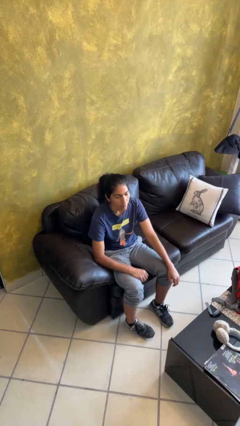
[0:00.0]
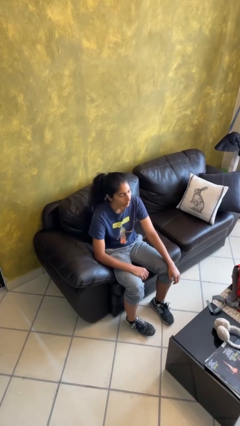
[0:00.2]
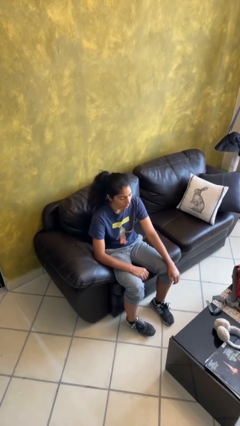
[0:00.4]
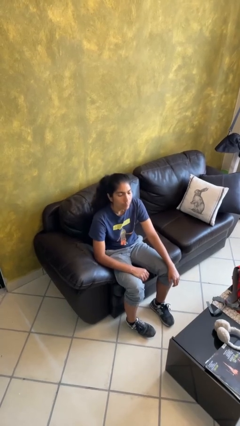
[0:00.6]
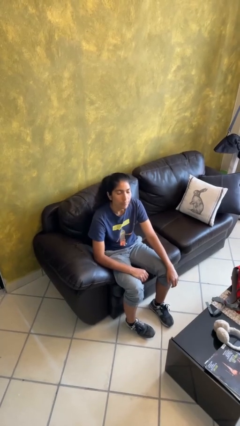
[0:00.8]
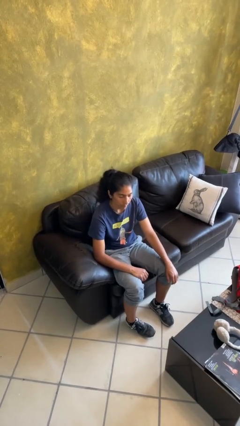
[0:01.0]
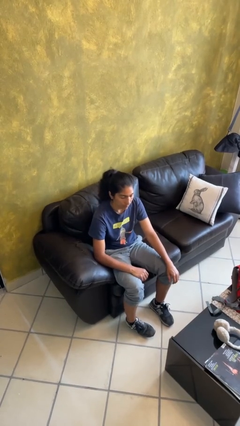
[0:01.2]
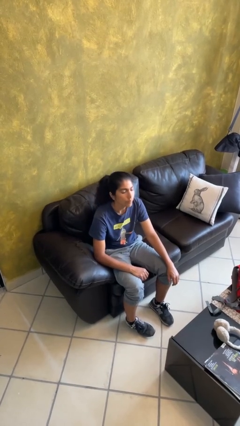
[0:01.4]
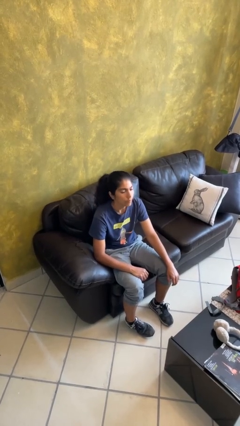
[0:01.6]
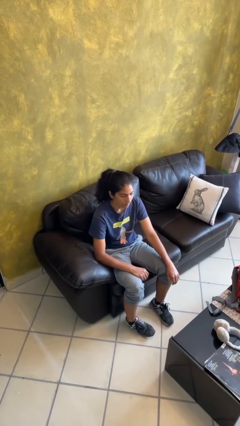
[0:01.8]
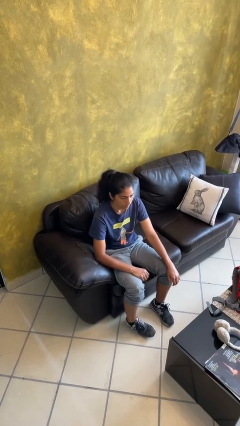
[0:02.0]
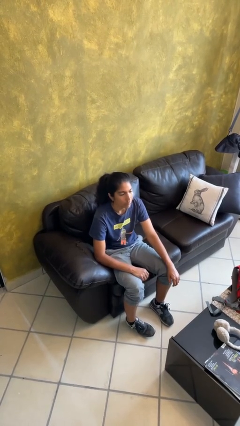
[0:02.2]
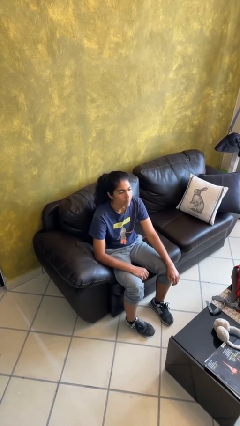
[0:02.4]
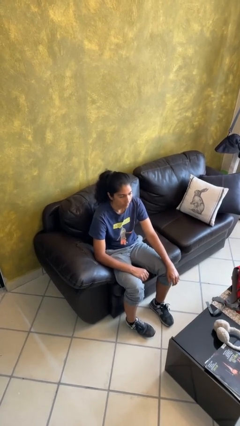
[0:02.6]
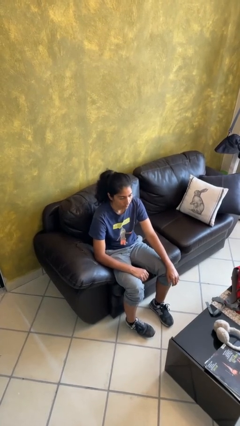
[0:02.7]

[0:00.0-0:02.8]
person nods head

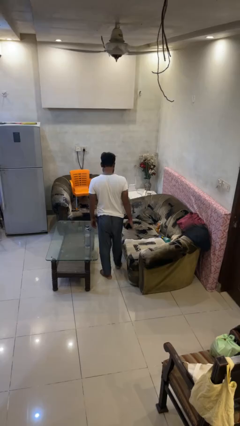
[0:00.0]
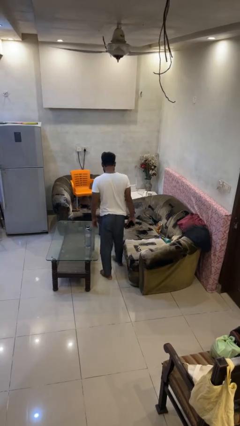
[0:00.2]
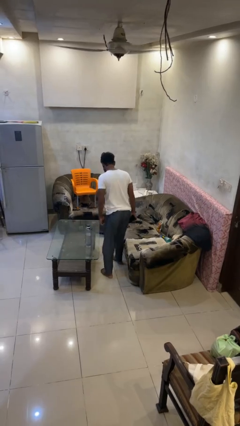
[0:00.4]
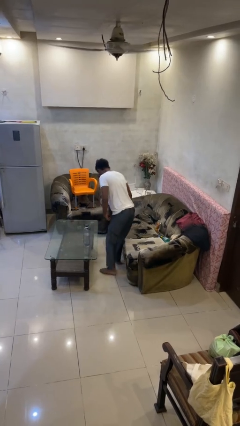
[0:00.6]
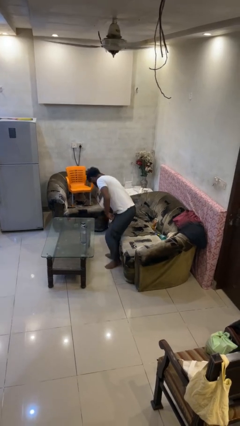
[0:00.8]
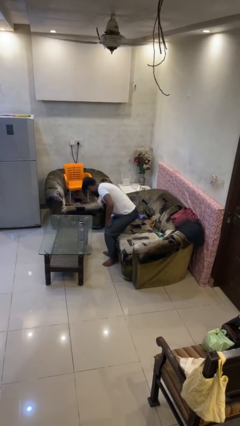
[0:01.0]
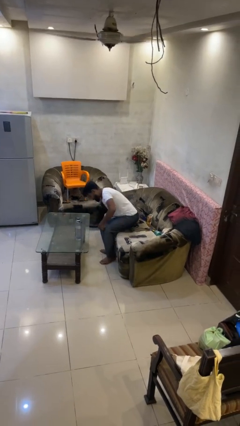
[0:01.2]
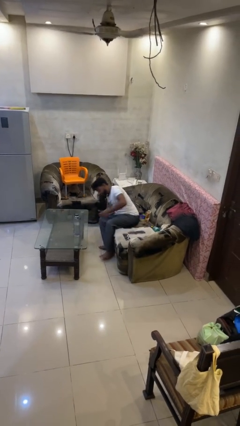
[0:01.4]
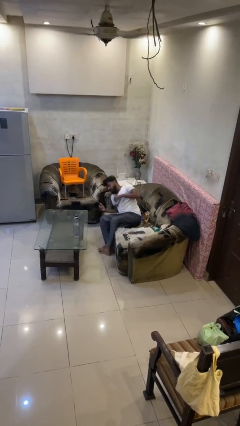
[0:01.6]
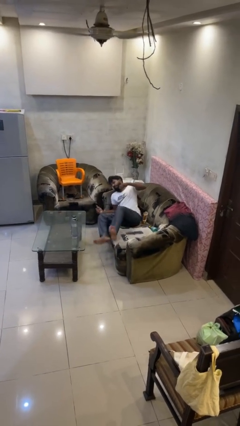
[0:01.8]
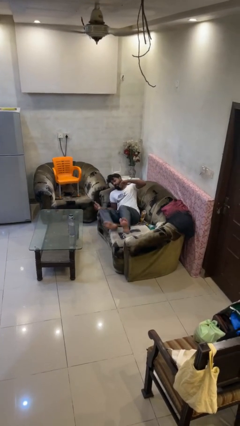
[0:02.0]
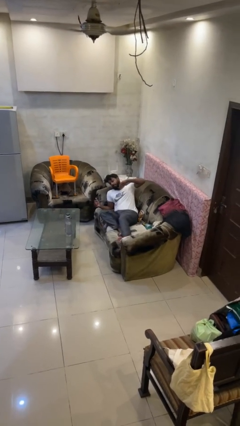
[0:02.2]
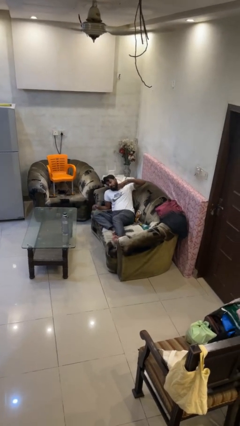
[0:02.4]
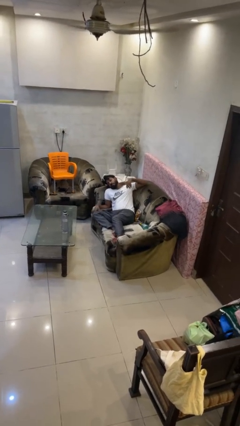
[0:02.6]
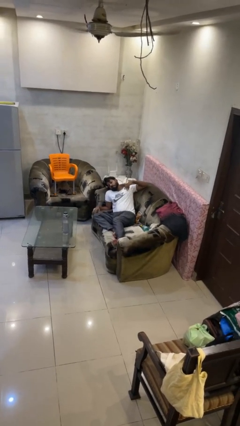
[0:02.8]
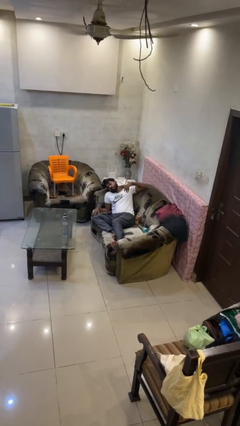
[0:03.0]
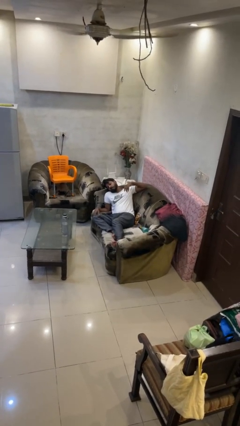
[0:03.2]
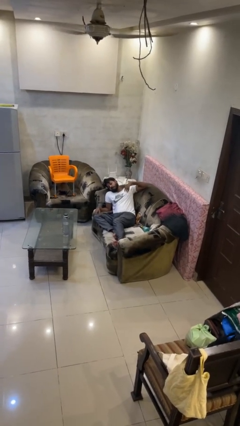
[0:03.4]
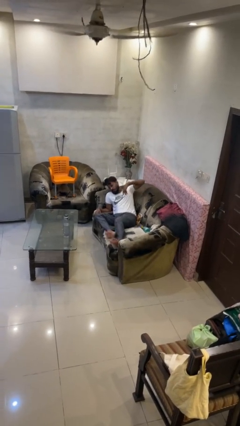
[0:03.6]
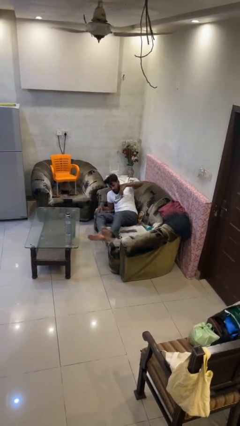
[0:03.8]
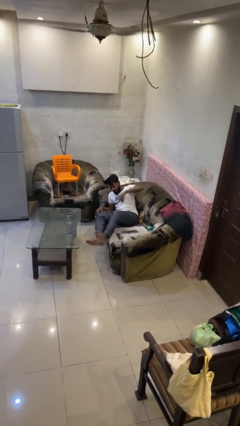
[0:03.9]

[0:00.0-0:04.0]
person lies down on couch

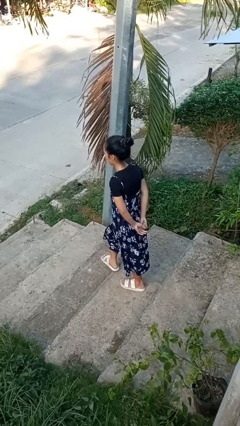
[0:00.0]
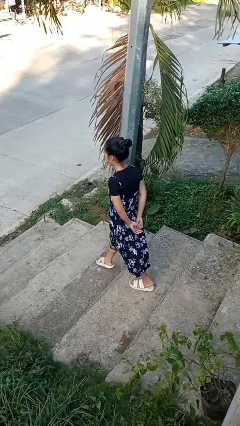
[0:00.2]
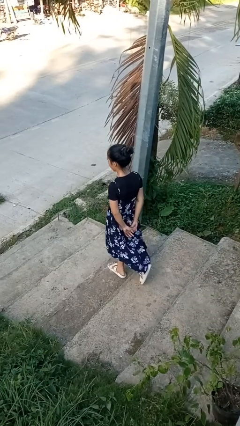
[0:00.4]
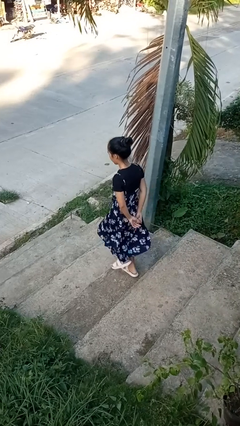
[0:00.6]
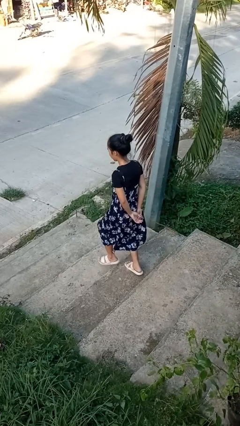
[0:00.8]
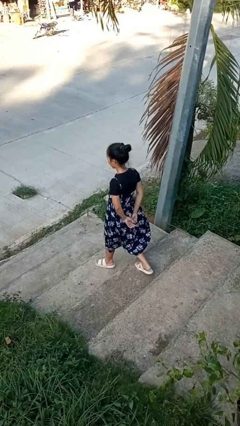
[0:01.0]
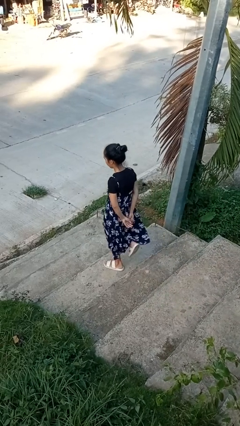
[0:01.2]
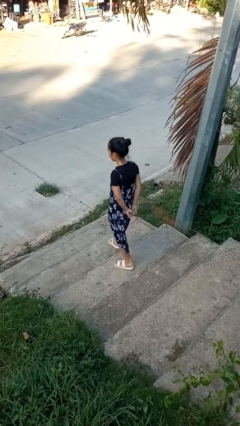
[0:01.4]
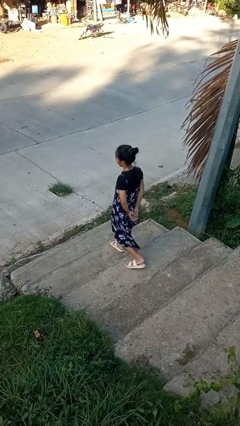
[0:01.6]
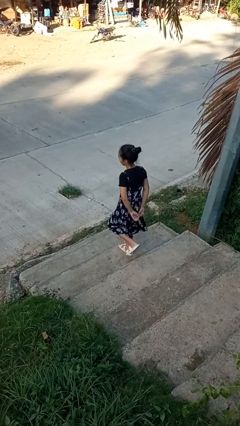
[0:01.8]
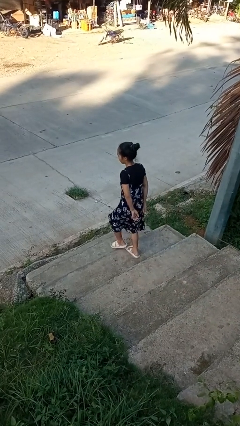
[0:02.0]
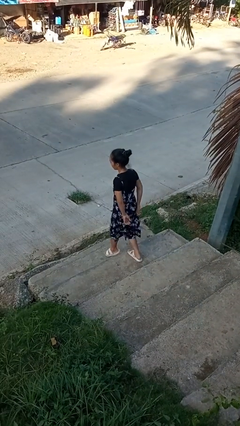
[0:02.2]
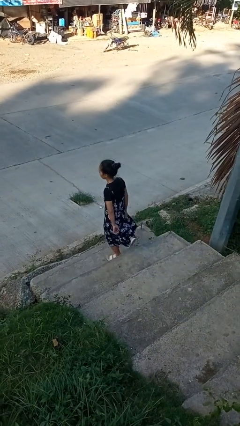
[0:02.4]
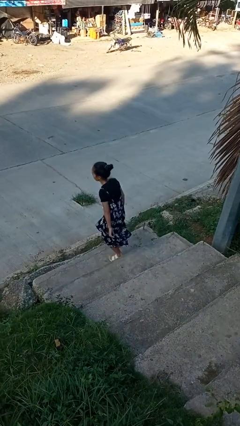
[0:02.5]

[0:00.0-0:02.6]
person climbs down stairs

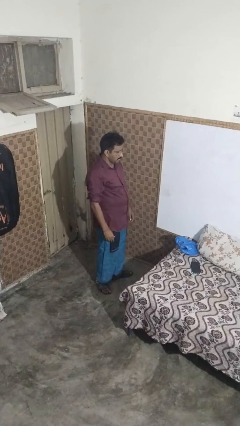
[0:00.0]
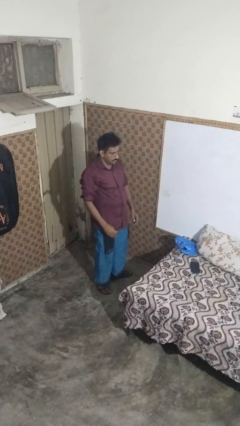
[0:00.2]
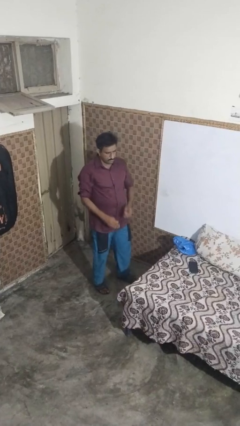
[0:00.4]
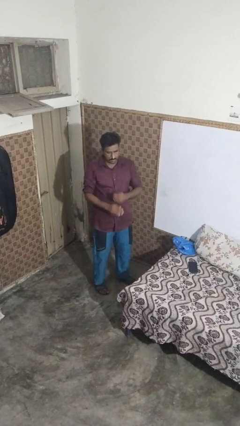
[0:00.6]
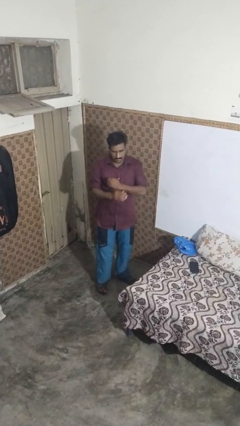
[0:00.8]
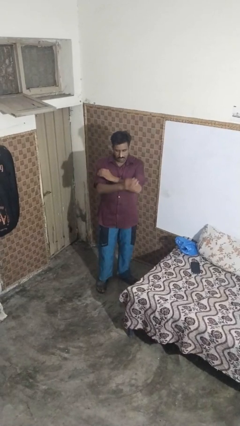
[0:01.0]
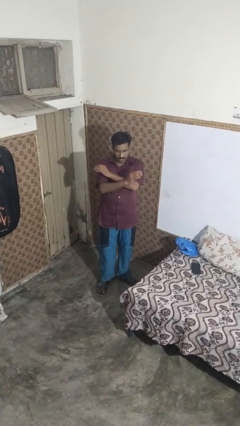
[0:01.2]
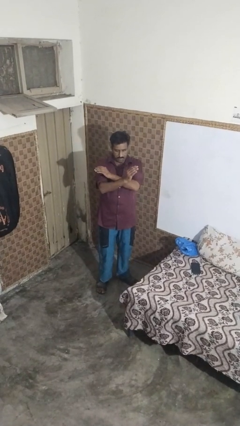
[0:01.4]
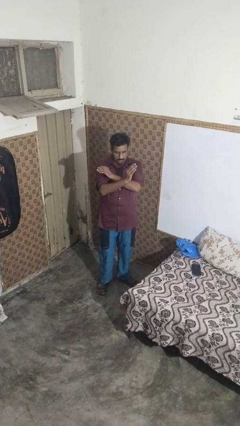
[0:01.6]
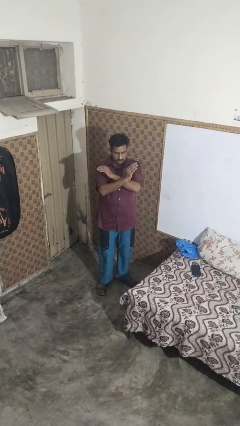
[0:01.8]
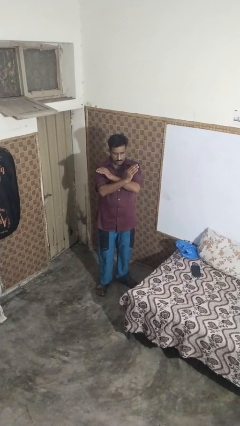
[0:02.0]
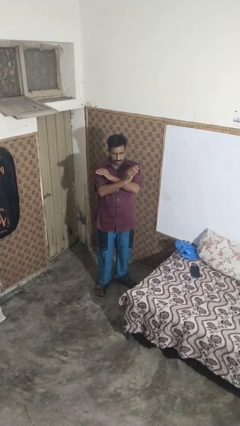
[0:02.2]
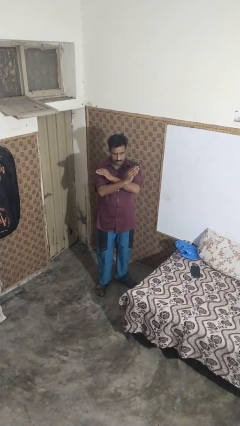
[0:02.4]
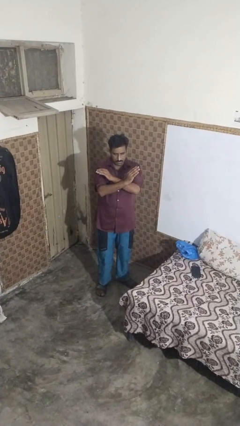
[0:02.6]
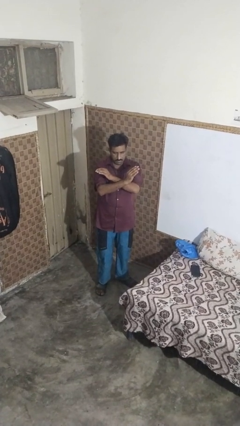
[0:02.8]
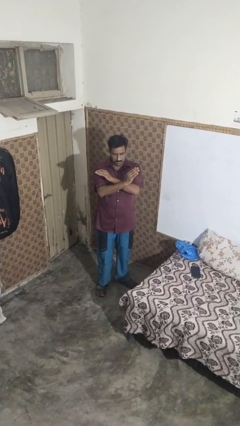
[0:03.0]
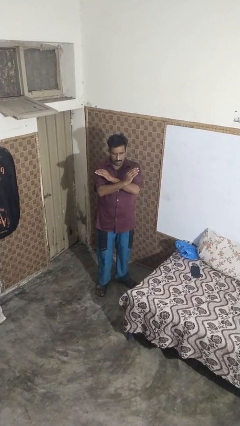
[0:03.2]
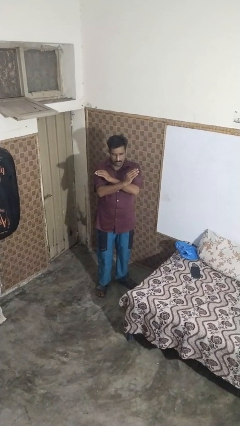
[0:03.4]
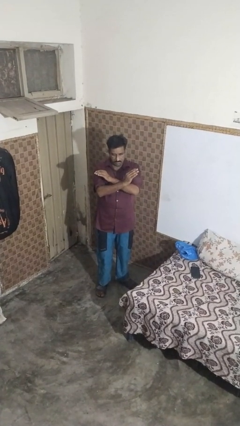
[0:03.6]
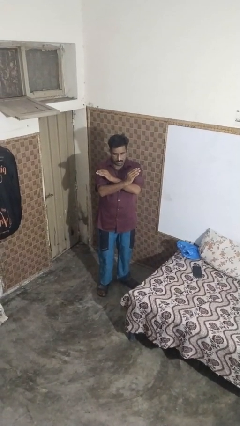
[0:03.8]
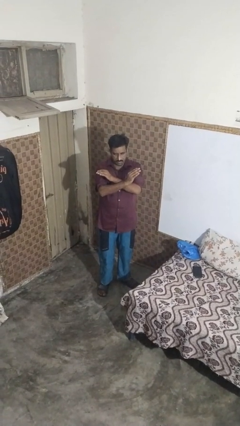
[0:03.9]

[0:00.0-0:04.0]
person gestures arms x

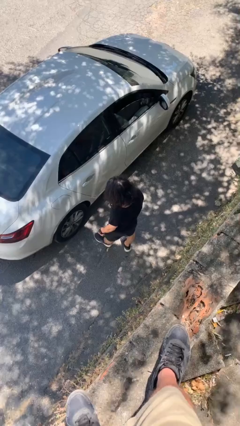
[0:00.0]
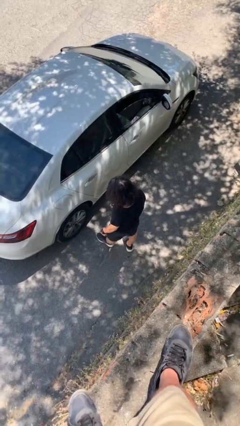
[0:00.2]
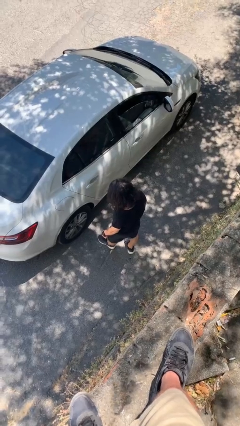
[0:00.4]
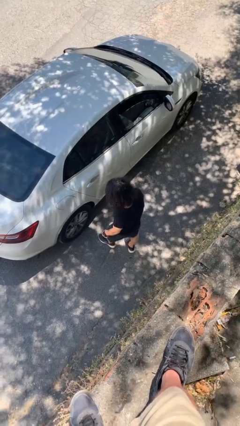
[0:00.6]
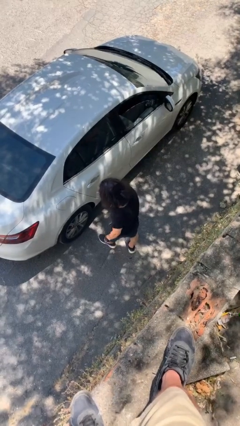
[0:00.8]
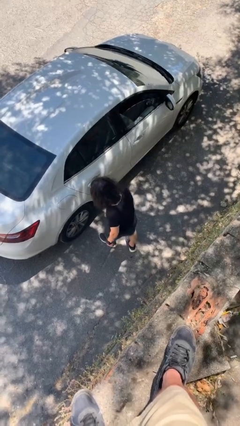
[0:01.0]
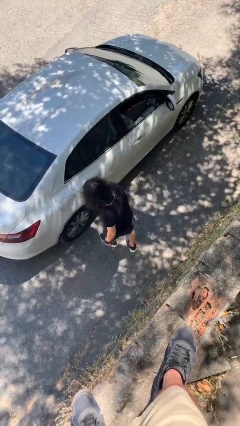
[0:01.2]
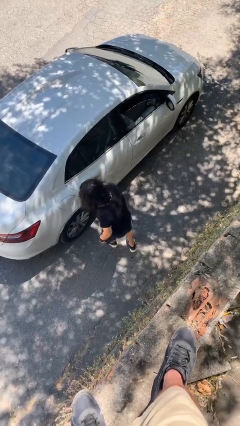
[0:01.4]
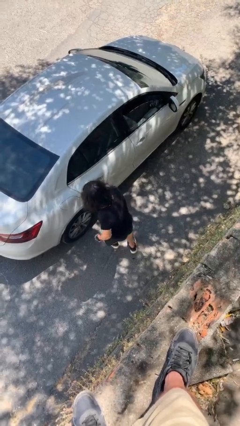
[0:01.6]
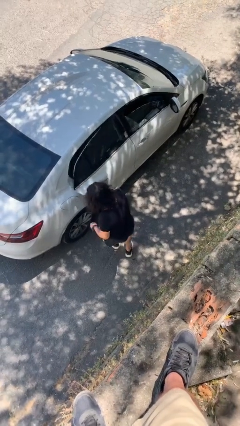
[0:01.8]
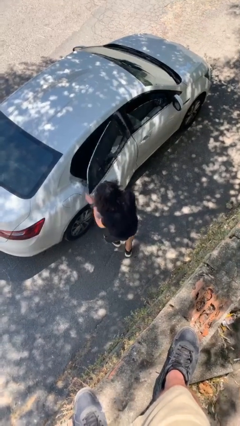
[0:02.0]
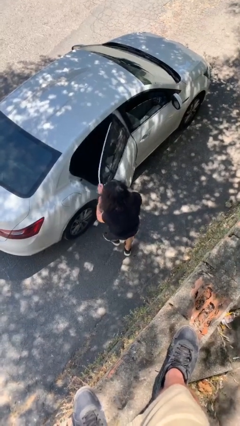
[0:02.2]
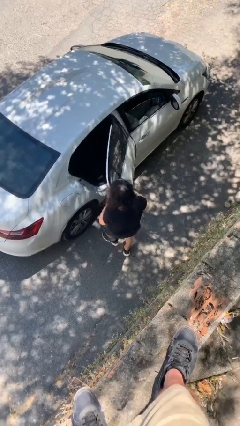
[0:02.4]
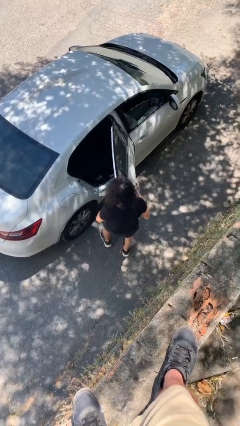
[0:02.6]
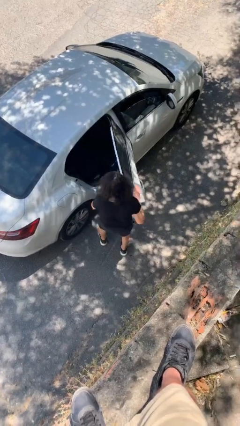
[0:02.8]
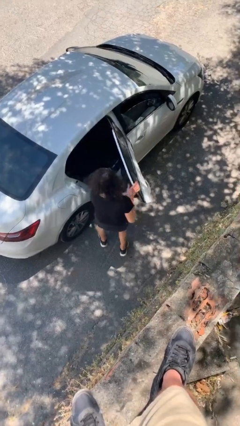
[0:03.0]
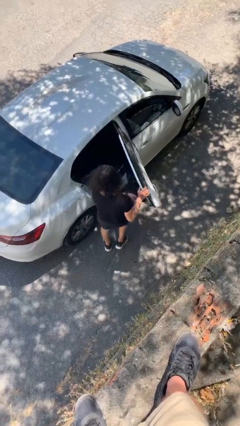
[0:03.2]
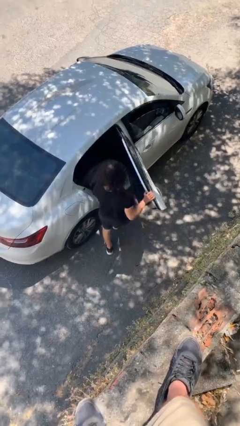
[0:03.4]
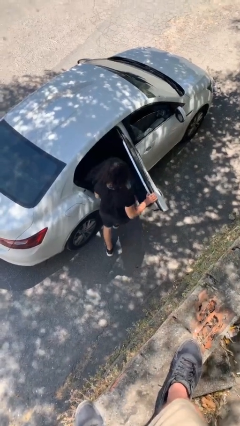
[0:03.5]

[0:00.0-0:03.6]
person opens car door

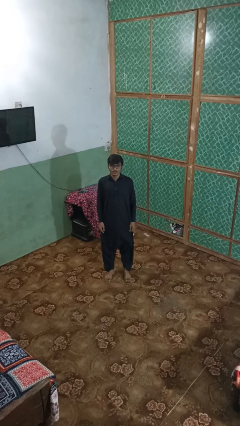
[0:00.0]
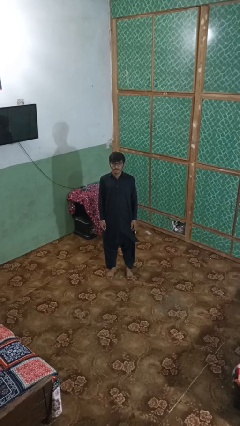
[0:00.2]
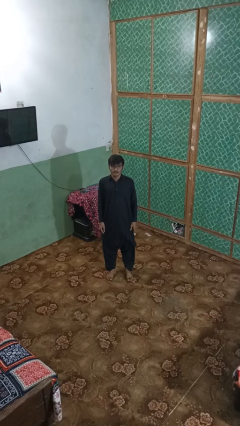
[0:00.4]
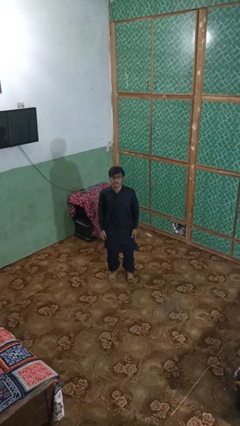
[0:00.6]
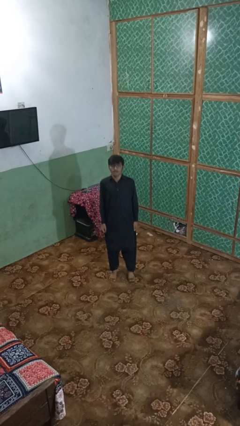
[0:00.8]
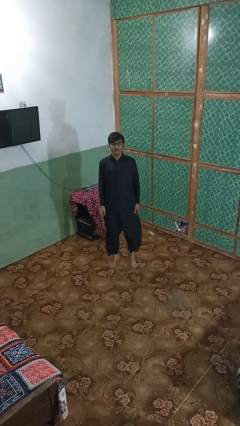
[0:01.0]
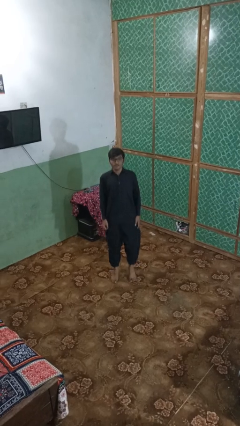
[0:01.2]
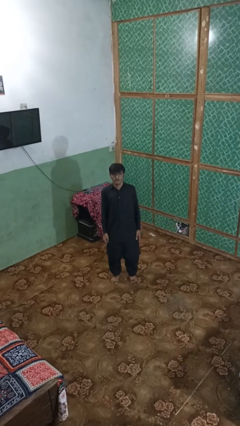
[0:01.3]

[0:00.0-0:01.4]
person jumps
